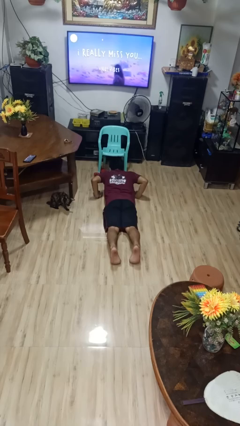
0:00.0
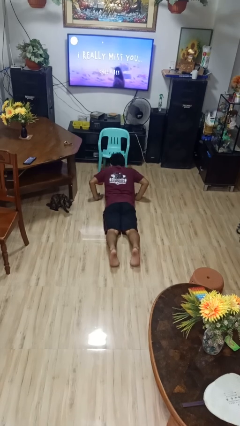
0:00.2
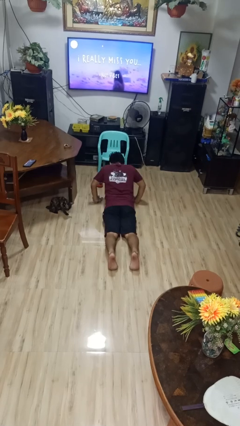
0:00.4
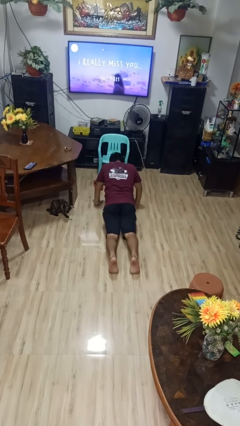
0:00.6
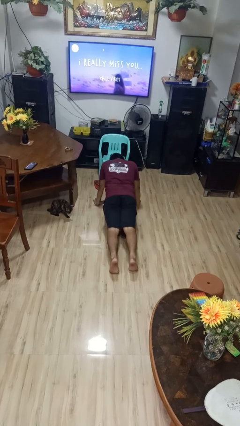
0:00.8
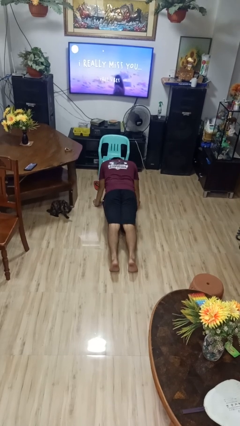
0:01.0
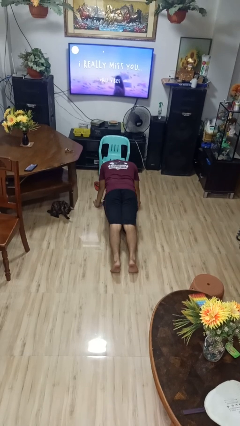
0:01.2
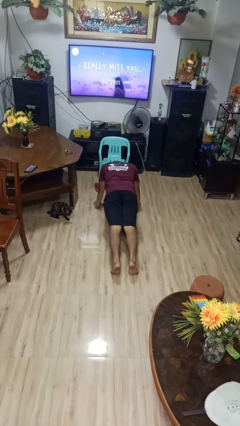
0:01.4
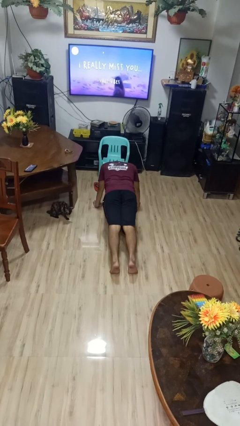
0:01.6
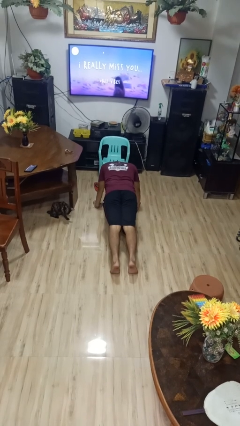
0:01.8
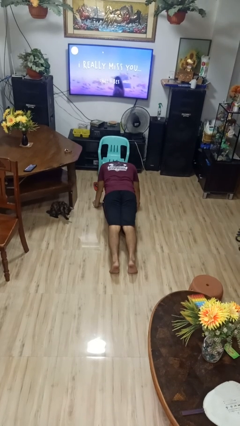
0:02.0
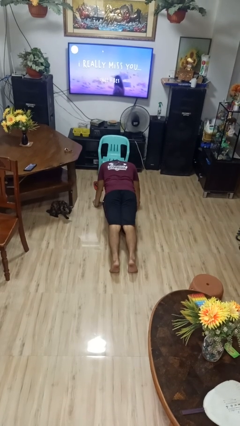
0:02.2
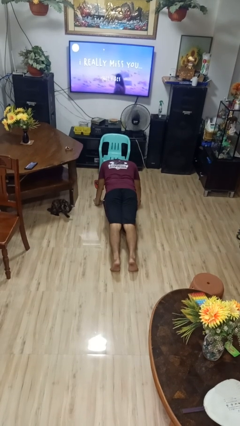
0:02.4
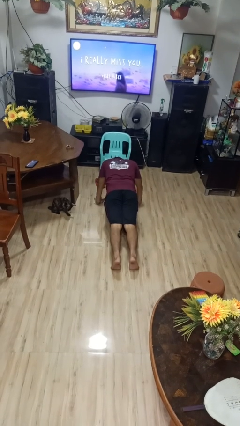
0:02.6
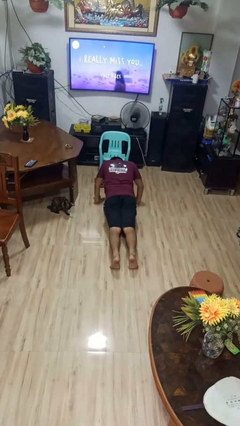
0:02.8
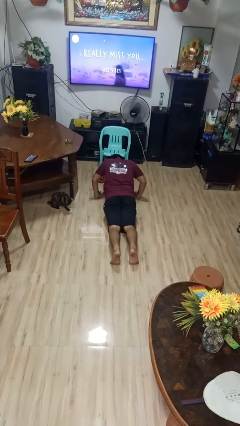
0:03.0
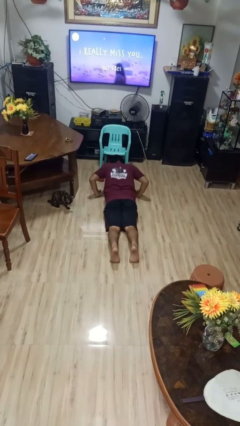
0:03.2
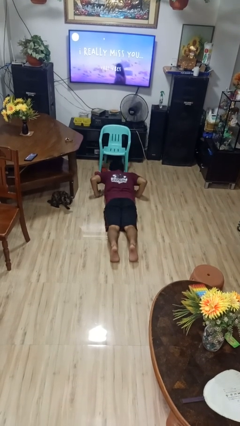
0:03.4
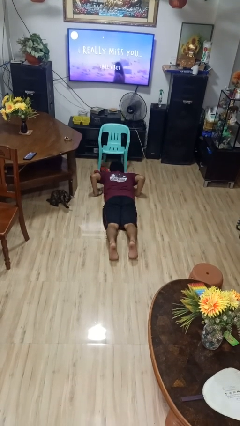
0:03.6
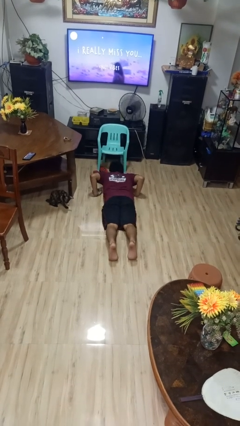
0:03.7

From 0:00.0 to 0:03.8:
person exercises with pushup

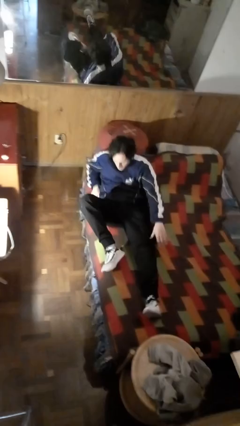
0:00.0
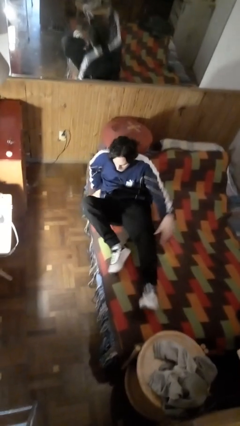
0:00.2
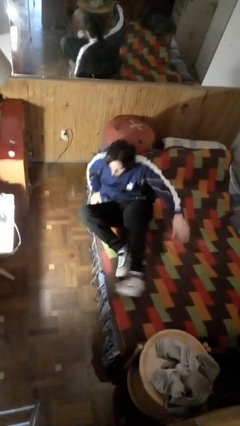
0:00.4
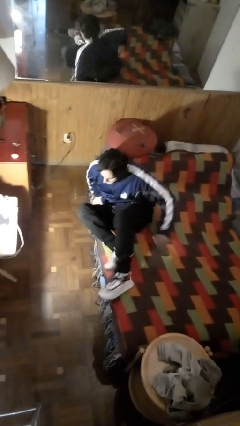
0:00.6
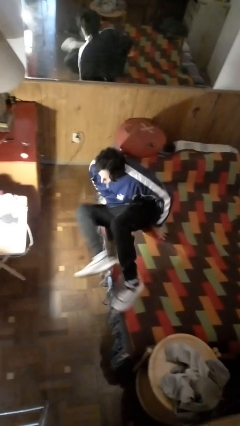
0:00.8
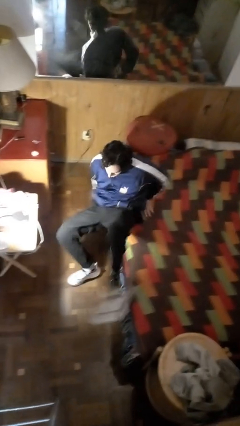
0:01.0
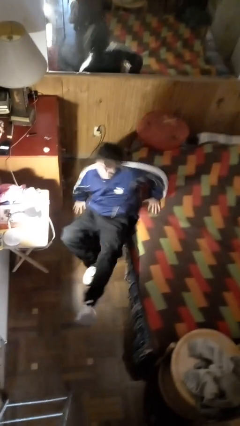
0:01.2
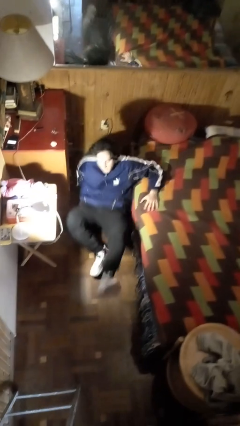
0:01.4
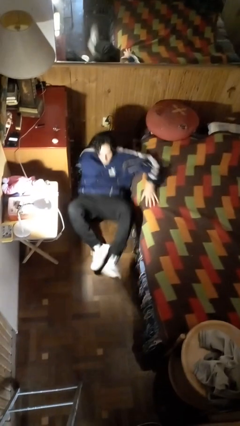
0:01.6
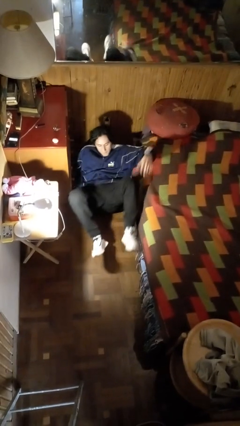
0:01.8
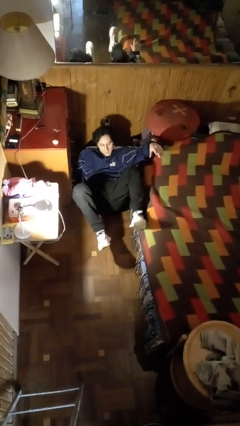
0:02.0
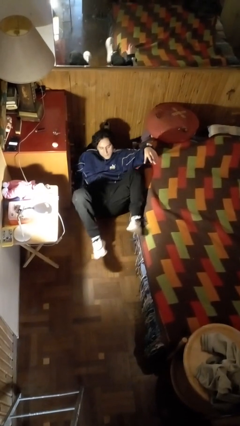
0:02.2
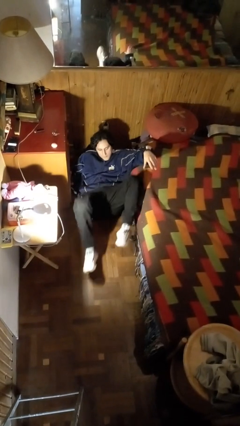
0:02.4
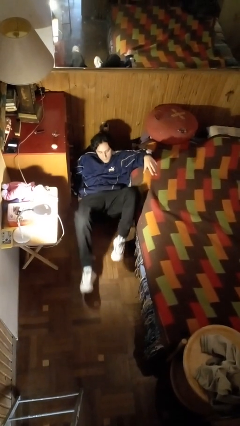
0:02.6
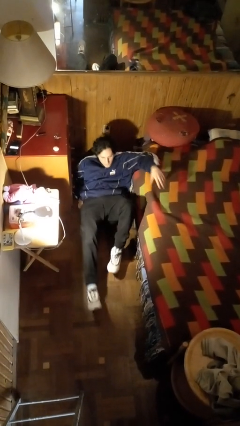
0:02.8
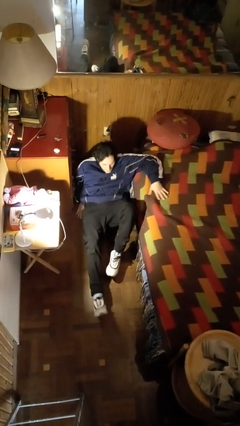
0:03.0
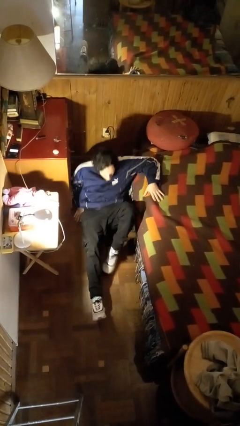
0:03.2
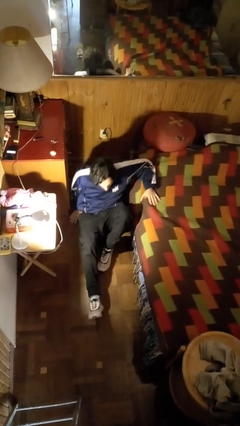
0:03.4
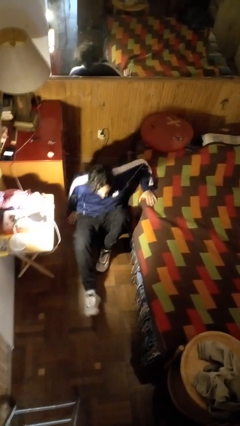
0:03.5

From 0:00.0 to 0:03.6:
person falls from bed

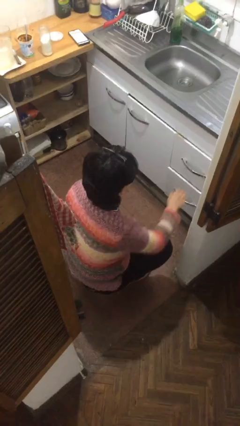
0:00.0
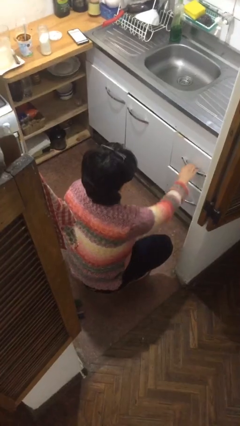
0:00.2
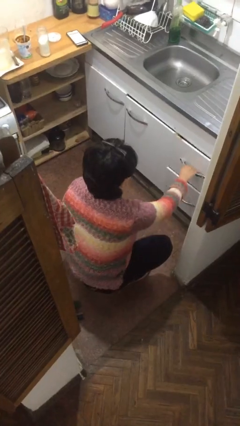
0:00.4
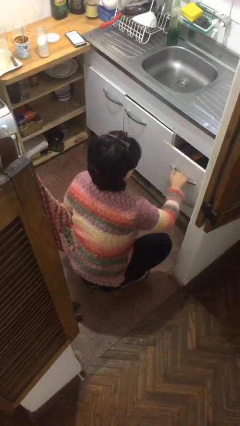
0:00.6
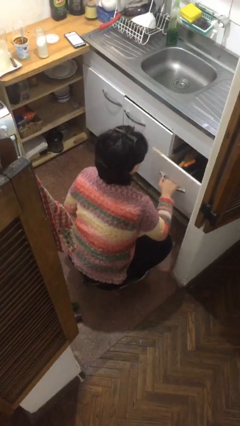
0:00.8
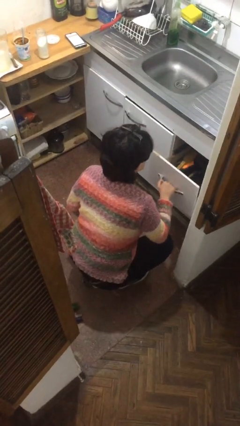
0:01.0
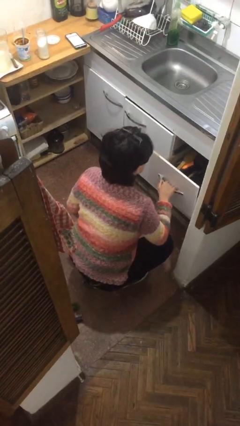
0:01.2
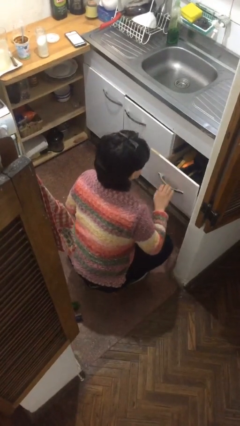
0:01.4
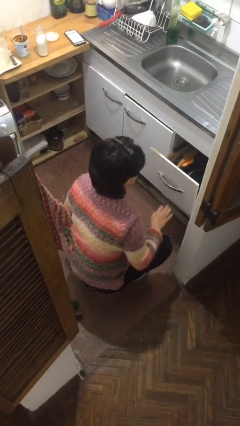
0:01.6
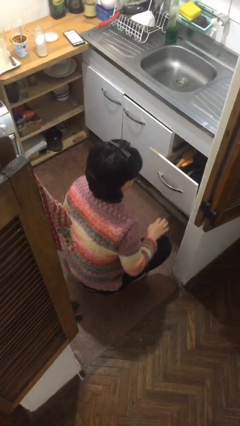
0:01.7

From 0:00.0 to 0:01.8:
person opens kitchen drawer

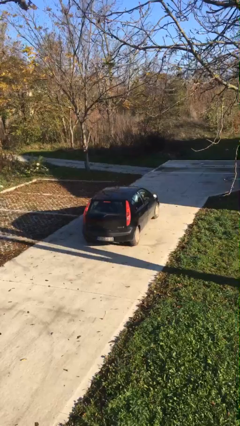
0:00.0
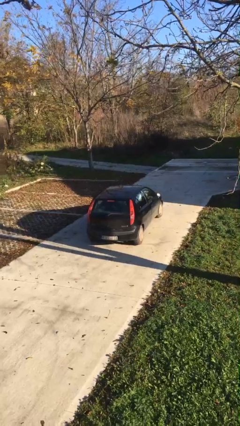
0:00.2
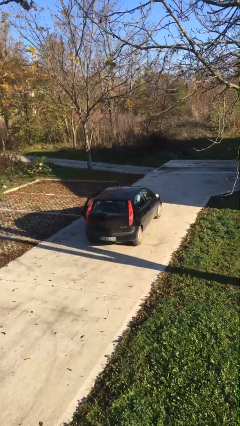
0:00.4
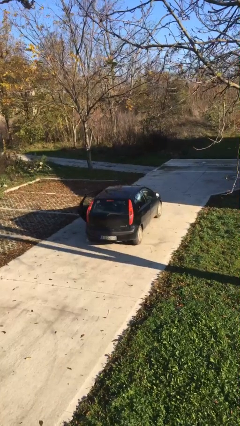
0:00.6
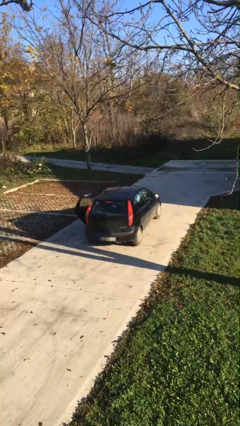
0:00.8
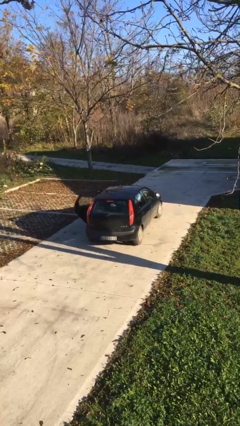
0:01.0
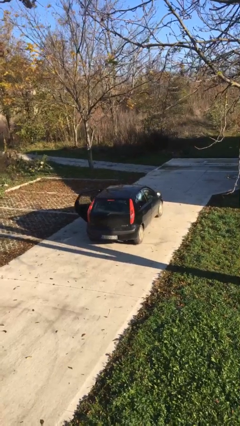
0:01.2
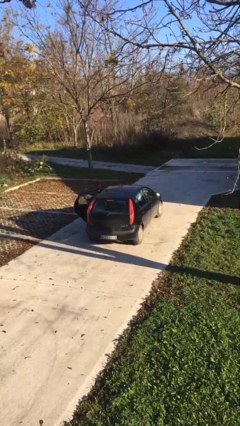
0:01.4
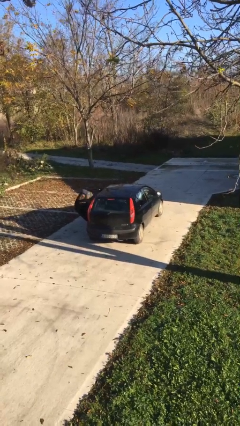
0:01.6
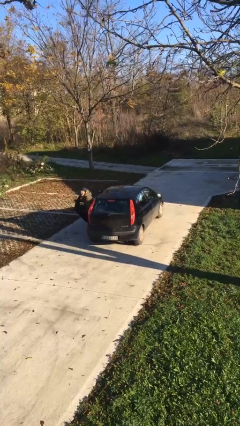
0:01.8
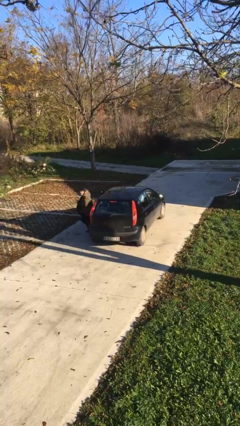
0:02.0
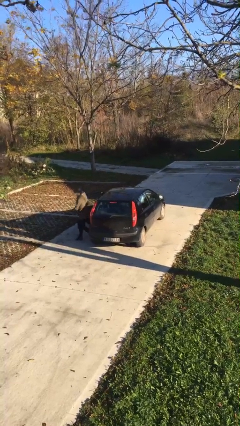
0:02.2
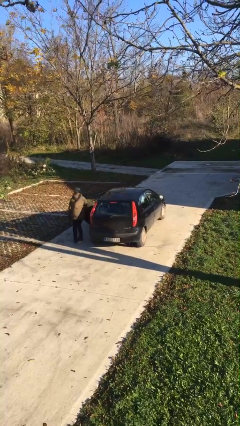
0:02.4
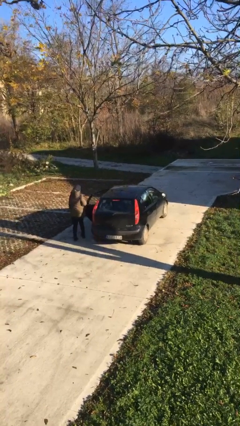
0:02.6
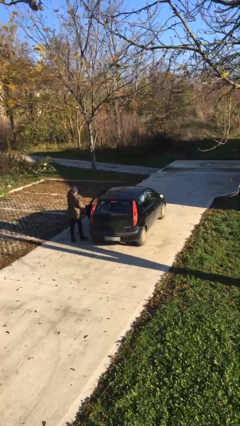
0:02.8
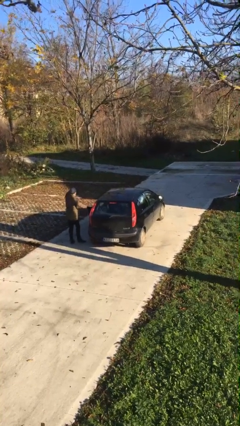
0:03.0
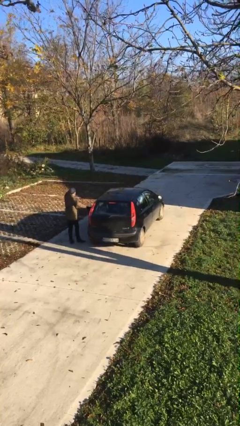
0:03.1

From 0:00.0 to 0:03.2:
car drops off person

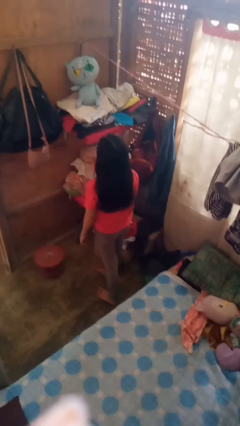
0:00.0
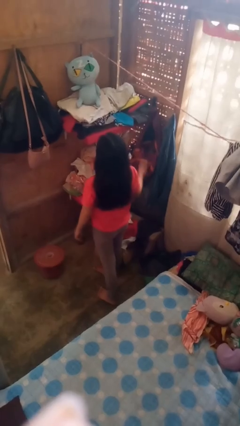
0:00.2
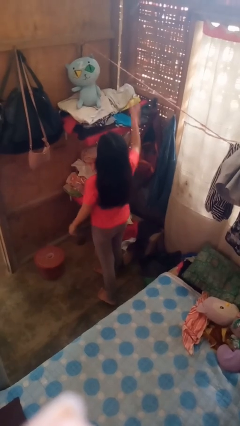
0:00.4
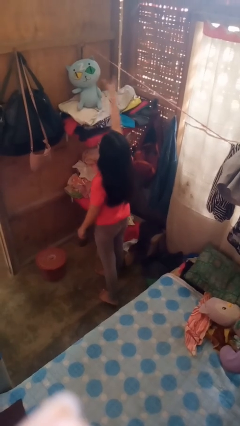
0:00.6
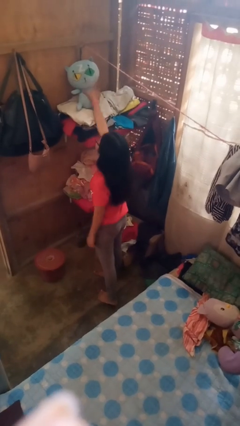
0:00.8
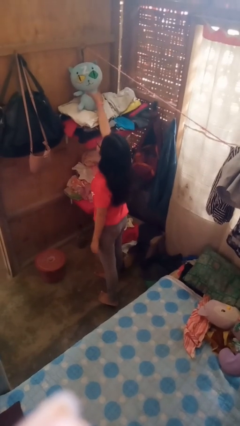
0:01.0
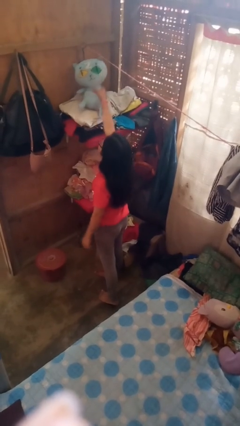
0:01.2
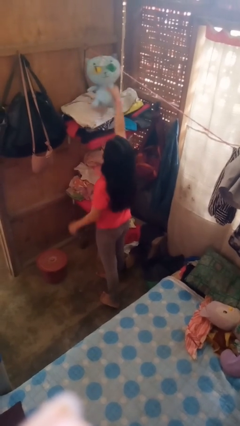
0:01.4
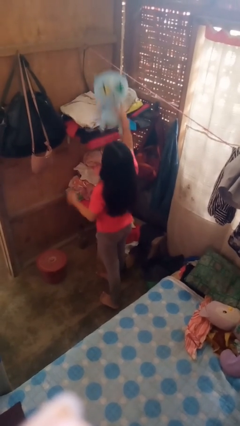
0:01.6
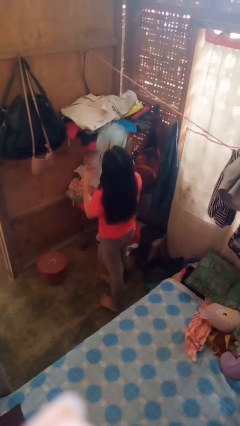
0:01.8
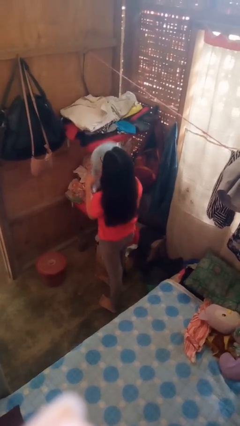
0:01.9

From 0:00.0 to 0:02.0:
person picks up object from shelf

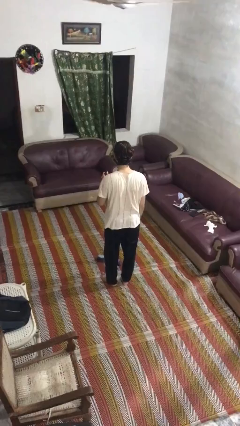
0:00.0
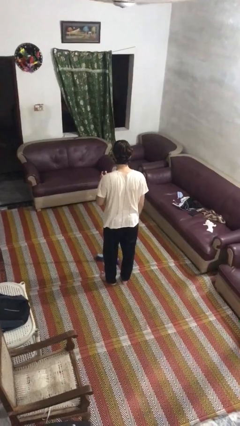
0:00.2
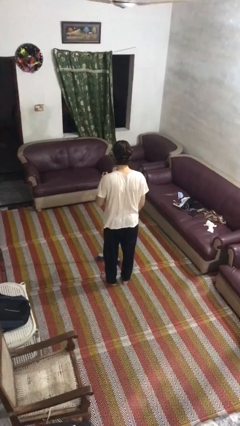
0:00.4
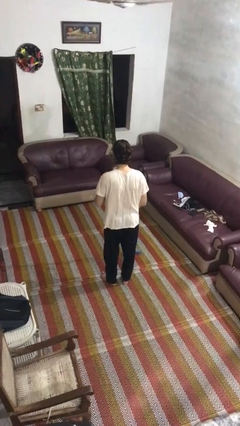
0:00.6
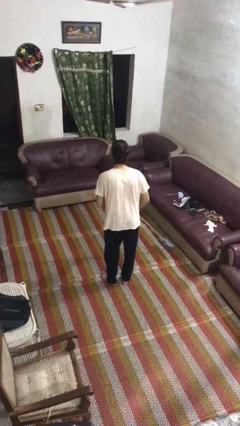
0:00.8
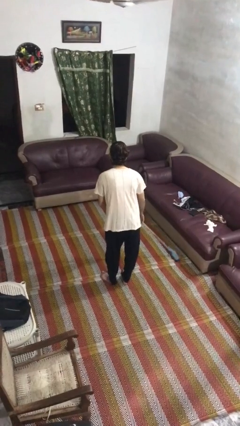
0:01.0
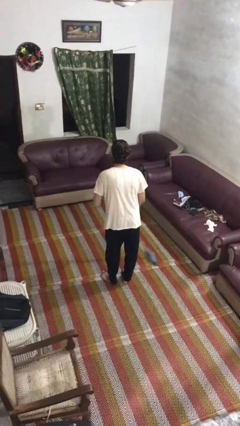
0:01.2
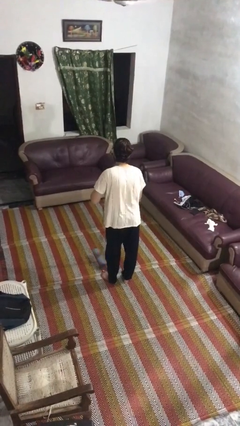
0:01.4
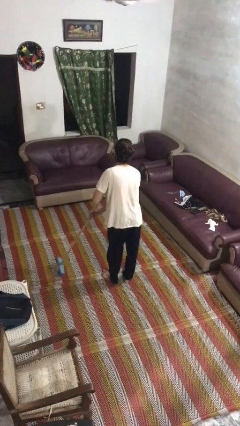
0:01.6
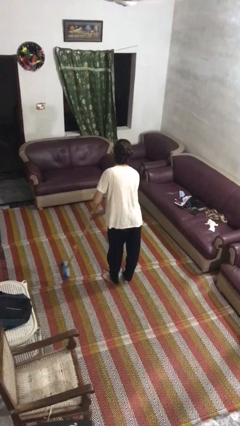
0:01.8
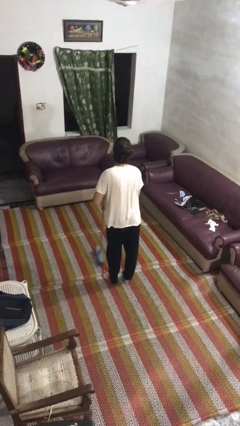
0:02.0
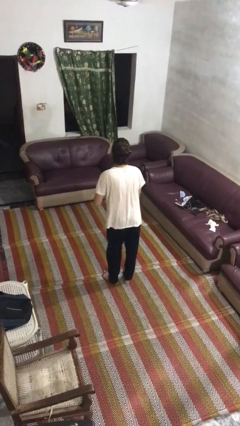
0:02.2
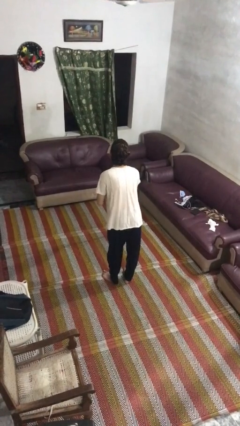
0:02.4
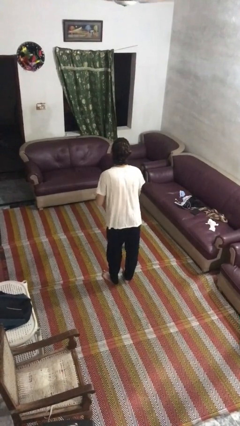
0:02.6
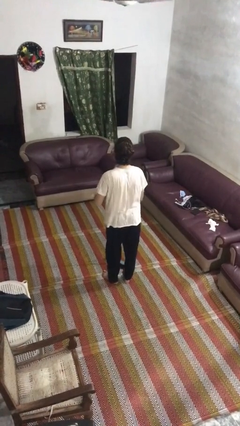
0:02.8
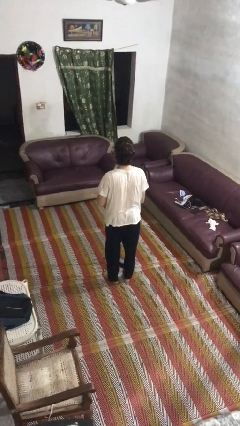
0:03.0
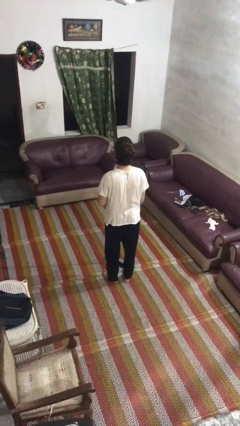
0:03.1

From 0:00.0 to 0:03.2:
person sweeps floor

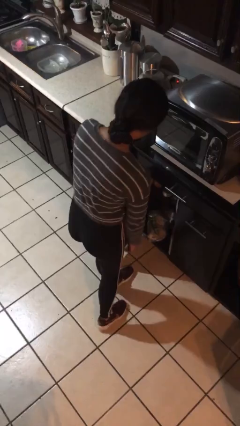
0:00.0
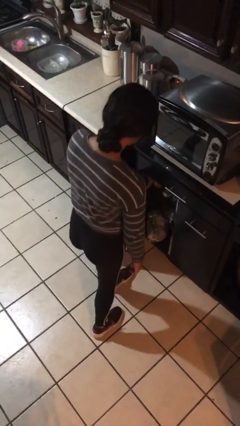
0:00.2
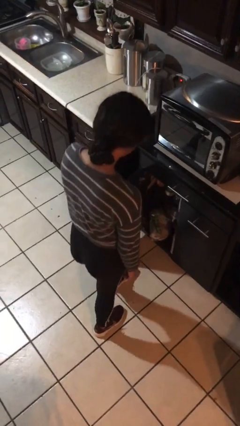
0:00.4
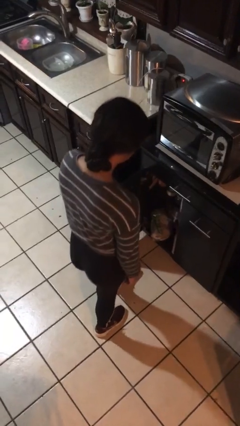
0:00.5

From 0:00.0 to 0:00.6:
person opens cabinet
